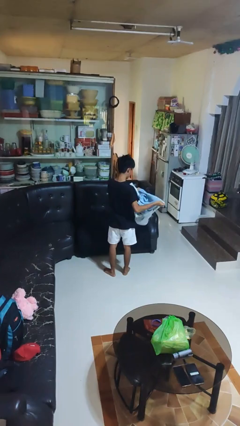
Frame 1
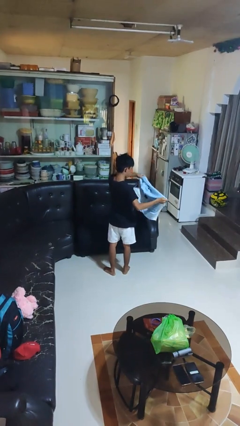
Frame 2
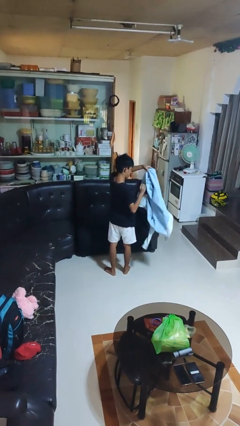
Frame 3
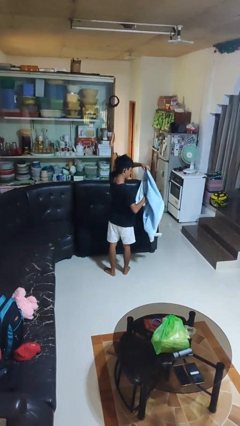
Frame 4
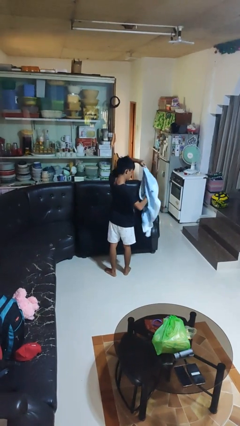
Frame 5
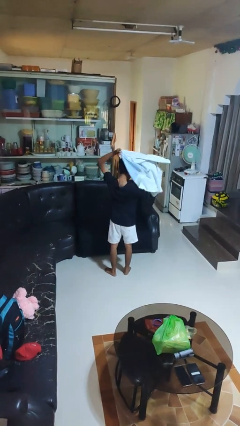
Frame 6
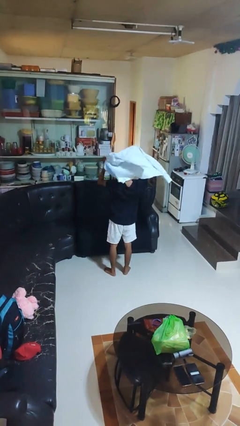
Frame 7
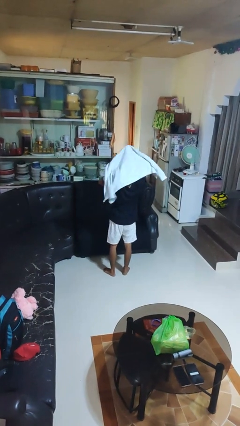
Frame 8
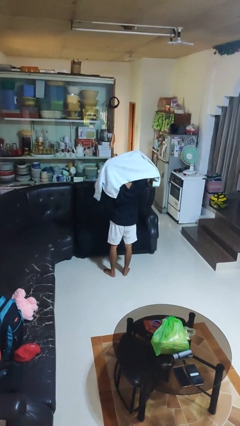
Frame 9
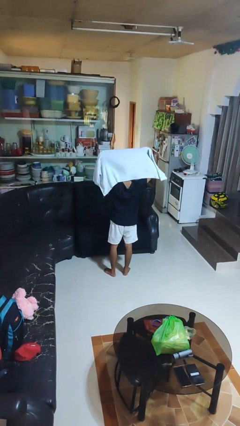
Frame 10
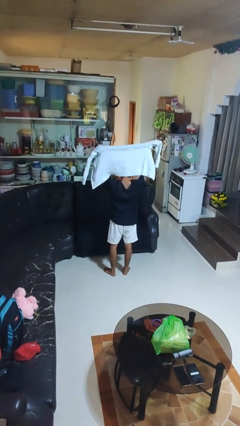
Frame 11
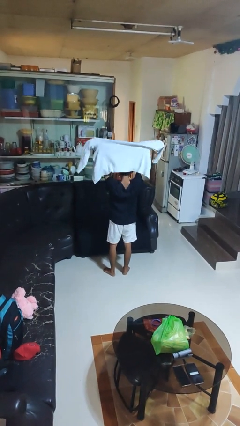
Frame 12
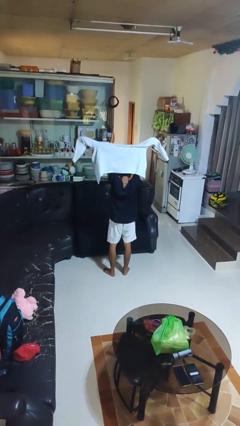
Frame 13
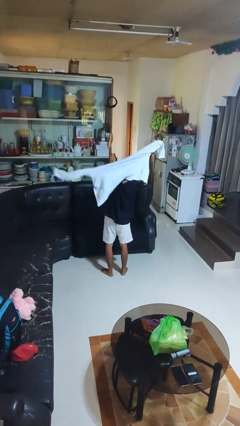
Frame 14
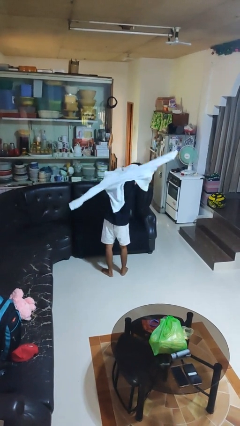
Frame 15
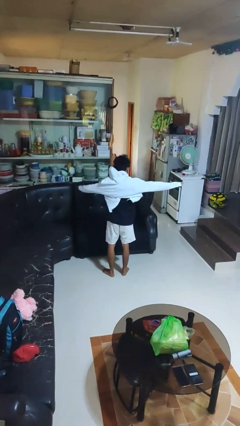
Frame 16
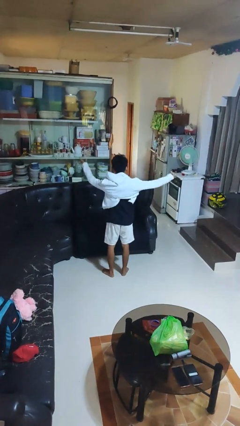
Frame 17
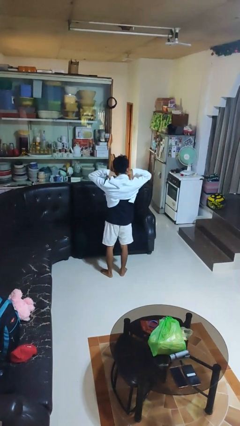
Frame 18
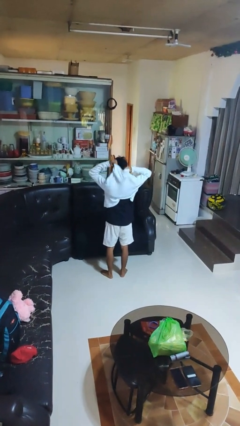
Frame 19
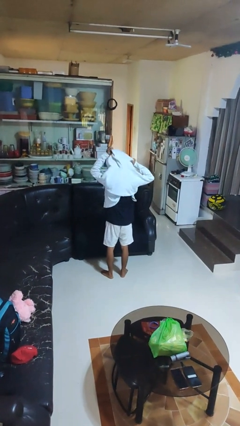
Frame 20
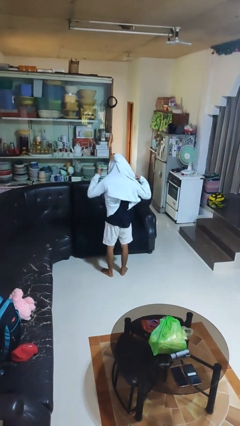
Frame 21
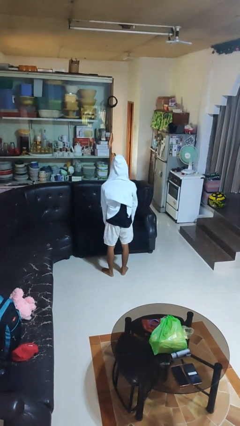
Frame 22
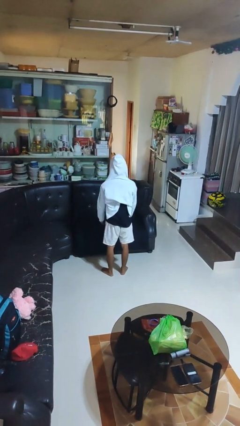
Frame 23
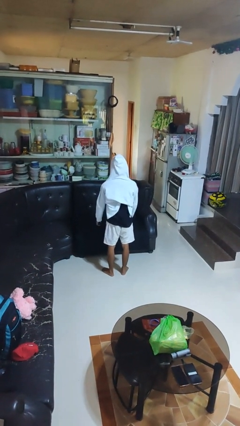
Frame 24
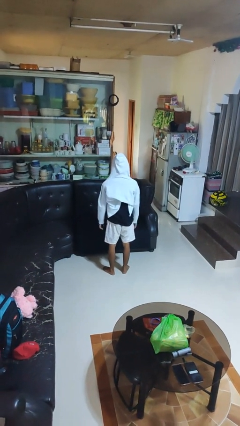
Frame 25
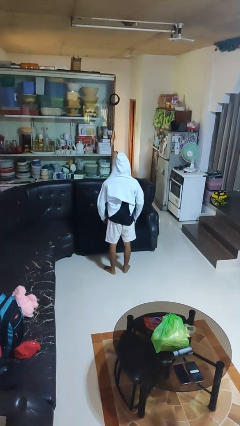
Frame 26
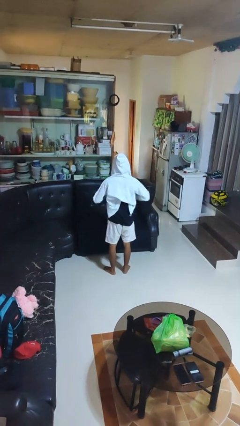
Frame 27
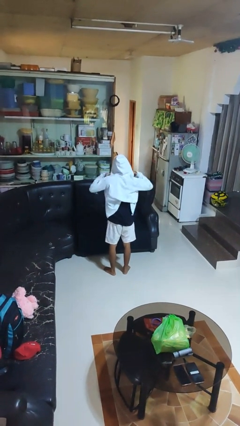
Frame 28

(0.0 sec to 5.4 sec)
person puts on hoodie

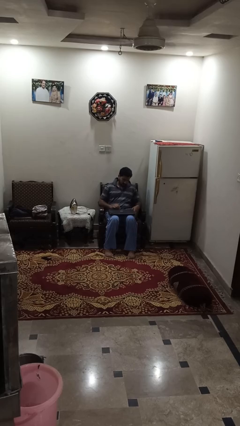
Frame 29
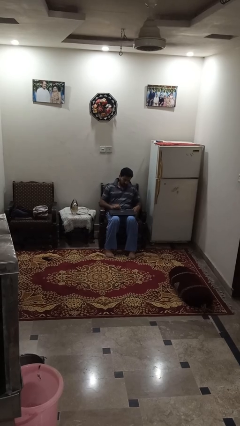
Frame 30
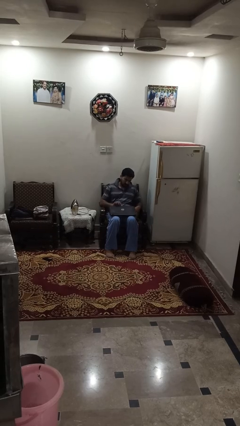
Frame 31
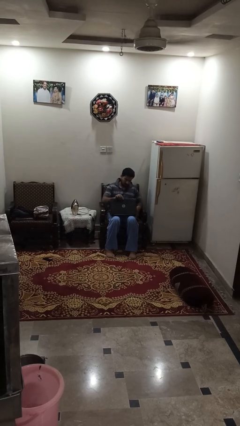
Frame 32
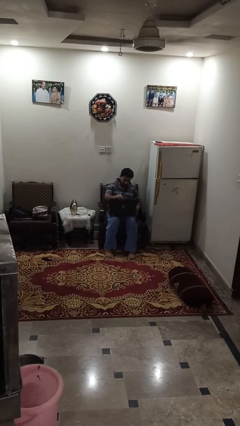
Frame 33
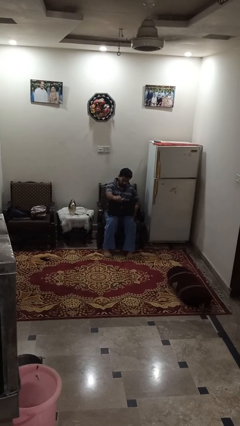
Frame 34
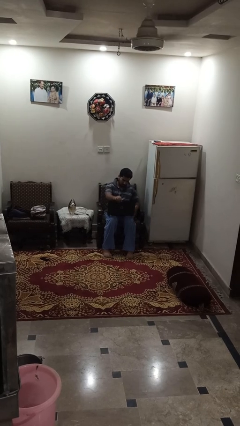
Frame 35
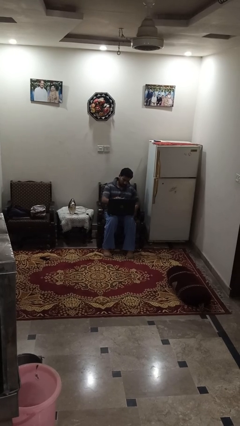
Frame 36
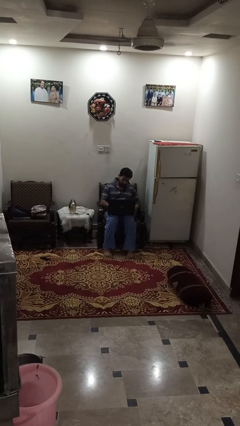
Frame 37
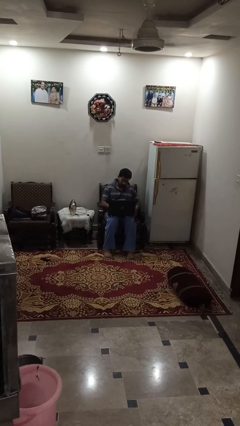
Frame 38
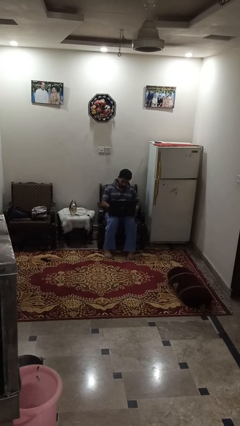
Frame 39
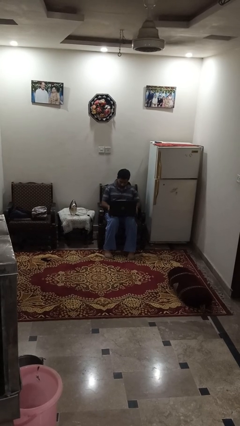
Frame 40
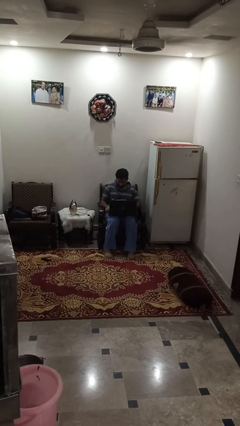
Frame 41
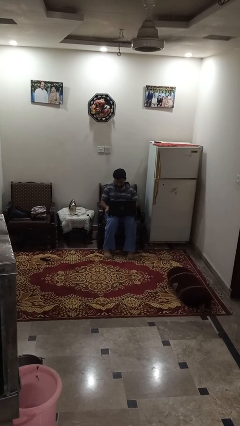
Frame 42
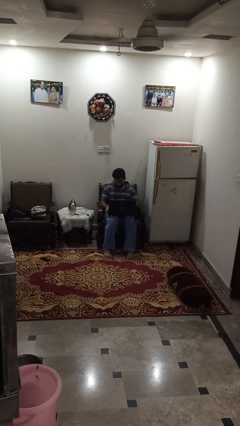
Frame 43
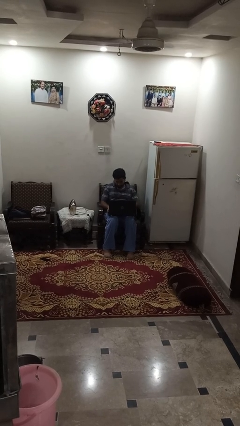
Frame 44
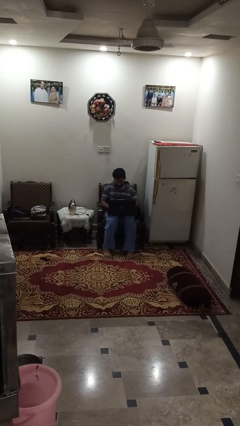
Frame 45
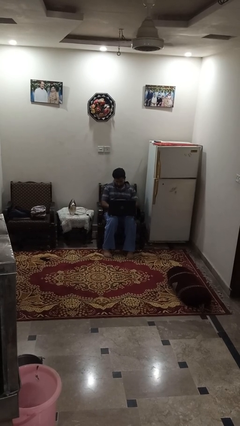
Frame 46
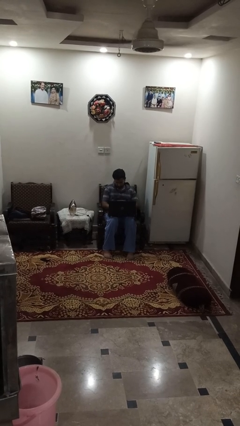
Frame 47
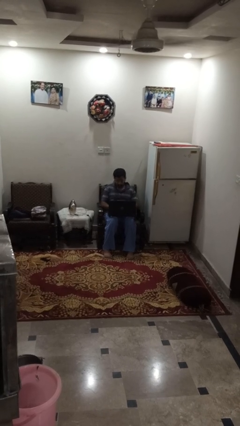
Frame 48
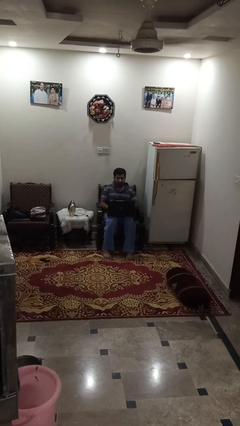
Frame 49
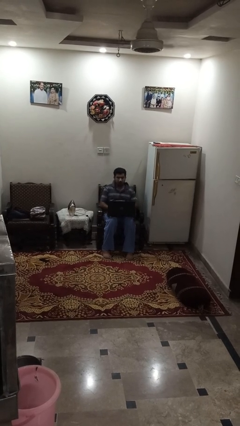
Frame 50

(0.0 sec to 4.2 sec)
person opens laptop

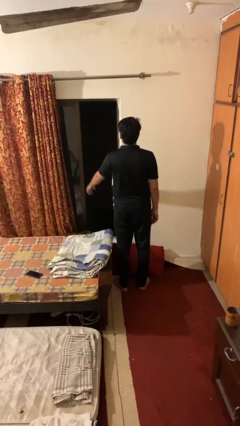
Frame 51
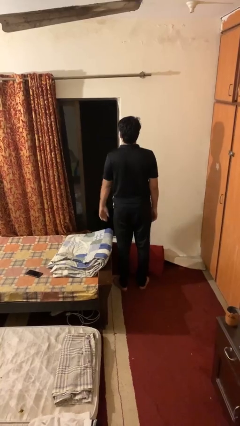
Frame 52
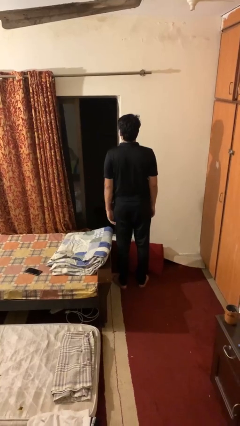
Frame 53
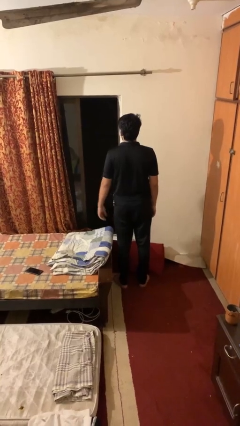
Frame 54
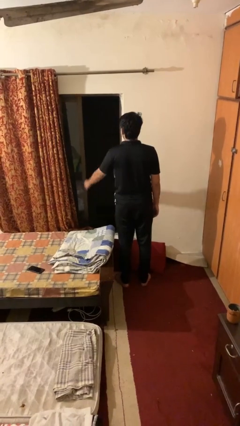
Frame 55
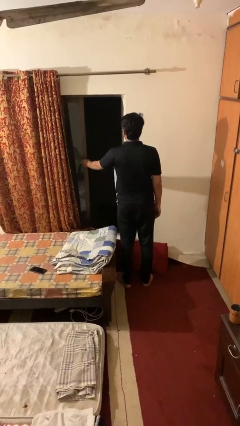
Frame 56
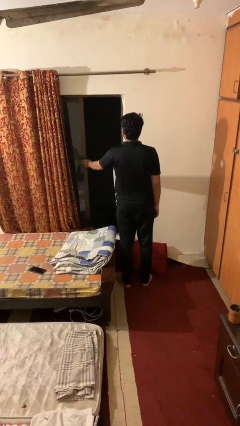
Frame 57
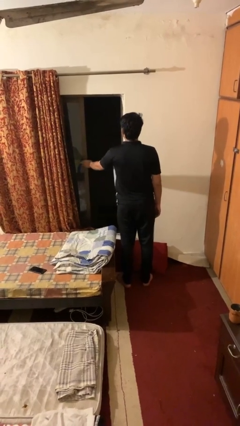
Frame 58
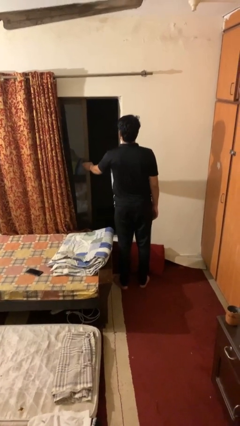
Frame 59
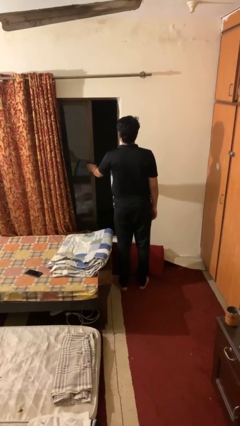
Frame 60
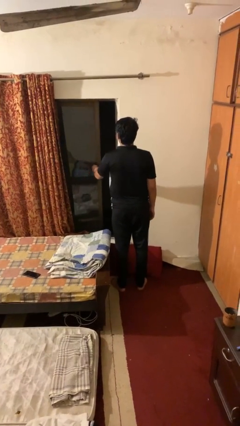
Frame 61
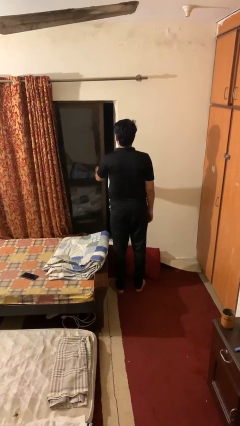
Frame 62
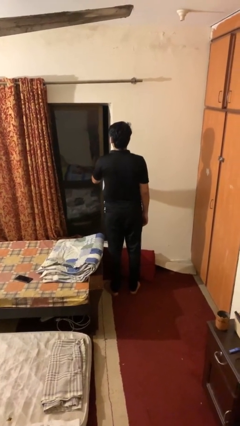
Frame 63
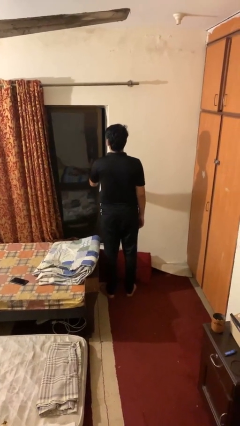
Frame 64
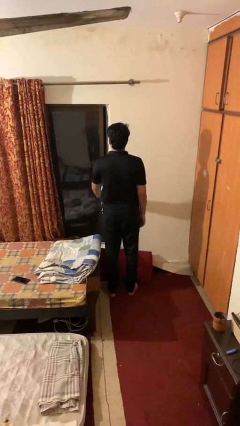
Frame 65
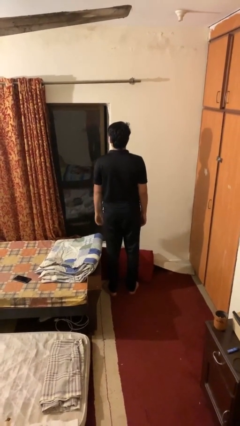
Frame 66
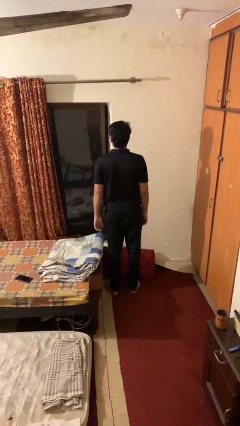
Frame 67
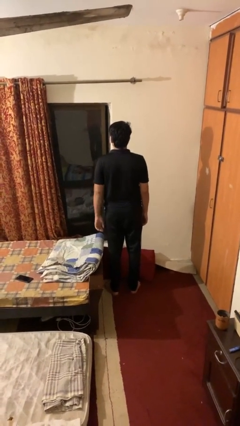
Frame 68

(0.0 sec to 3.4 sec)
person closes home window

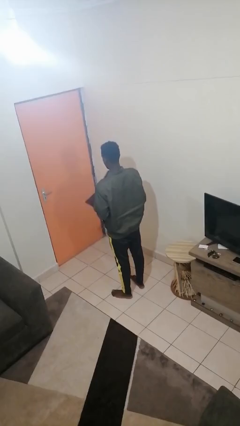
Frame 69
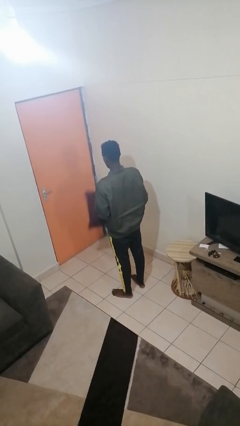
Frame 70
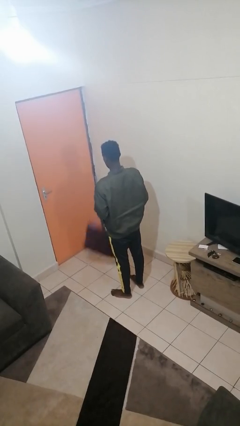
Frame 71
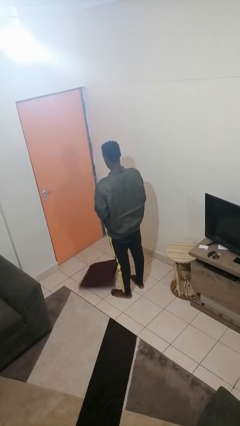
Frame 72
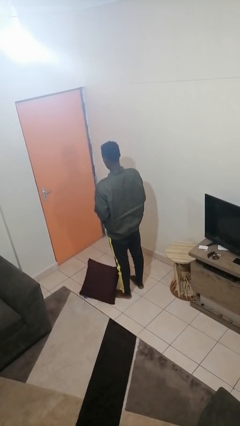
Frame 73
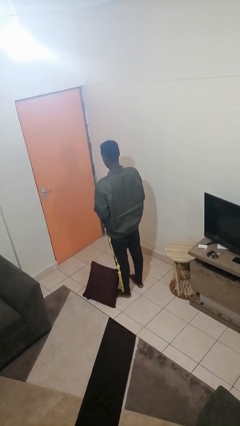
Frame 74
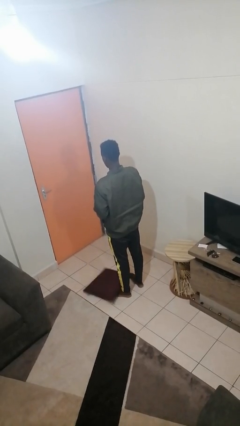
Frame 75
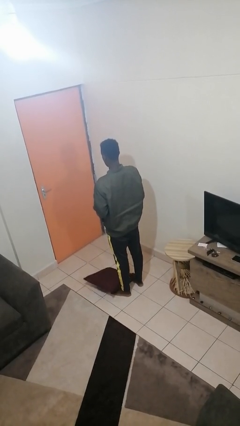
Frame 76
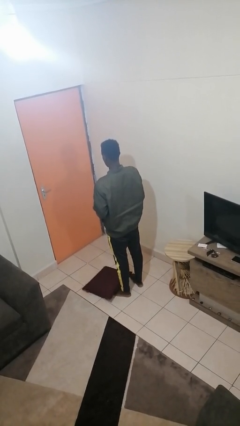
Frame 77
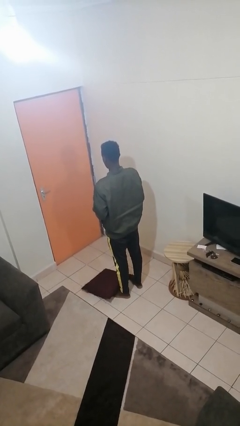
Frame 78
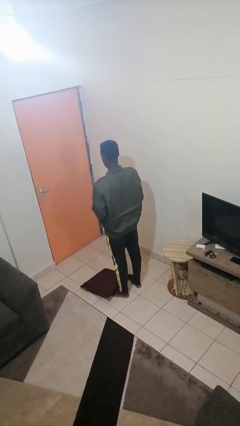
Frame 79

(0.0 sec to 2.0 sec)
person drops object

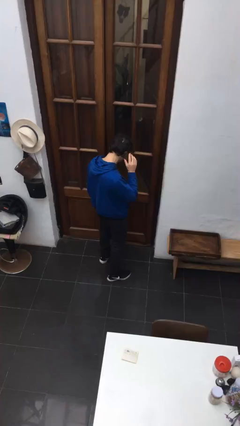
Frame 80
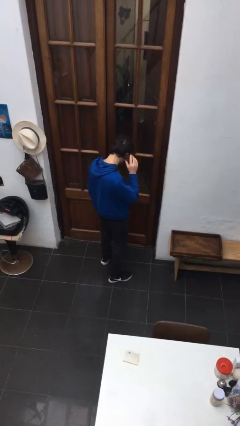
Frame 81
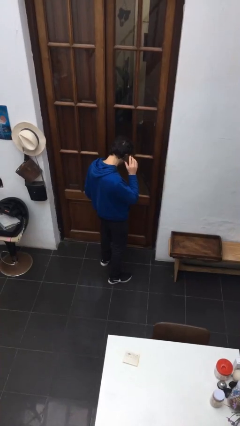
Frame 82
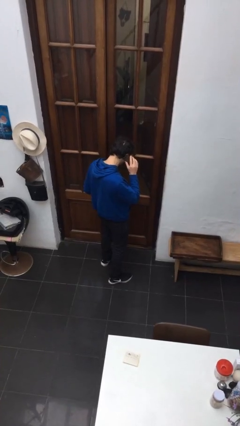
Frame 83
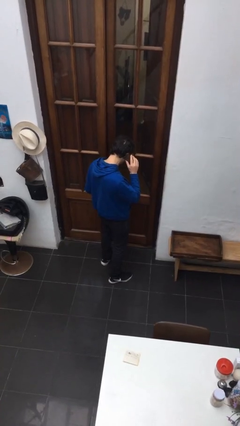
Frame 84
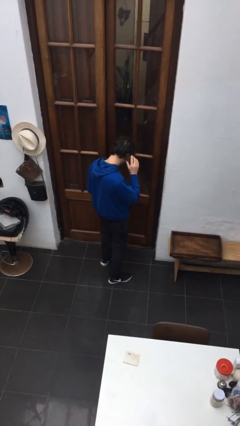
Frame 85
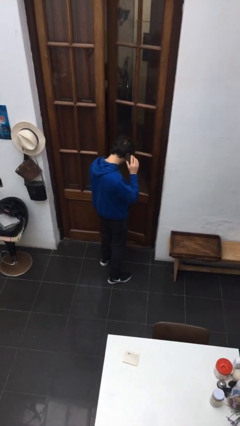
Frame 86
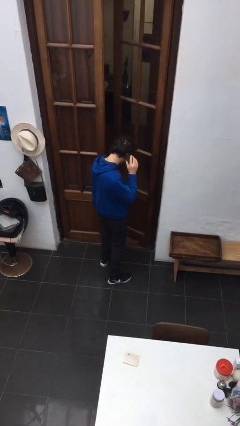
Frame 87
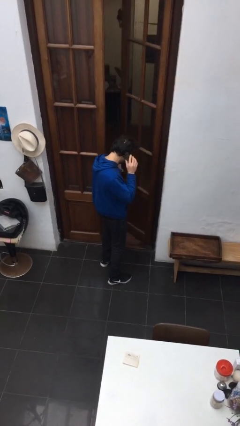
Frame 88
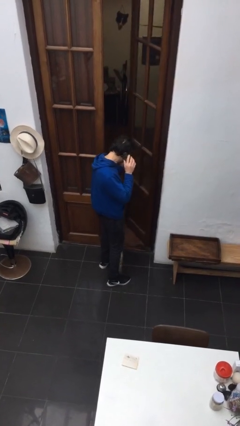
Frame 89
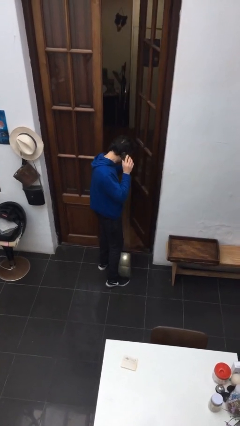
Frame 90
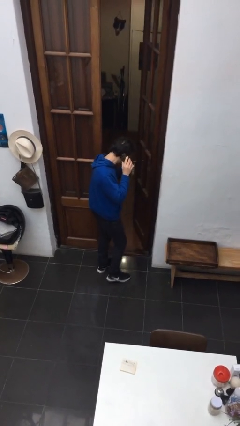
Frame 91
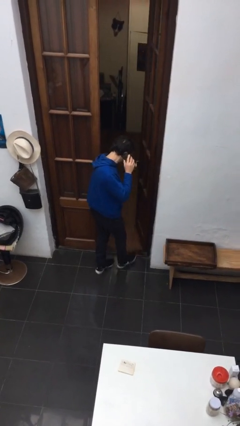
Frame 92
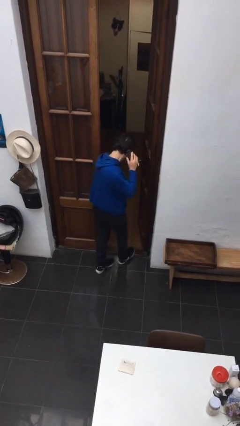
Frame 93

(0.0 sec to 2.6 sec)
person opens facility door
